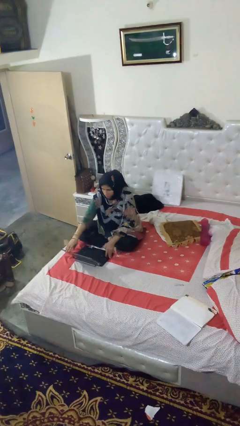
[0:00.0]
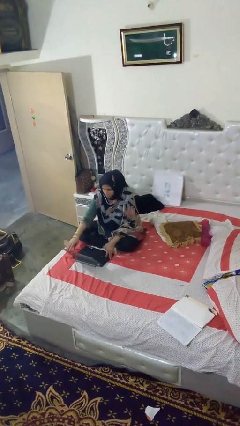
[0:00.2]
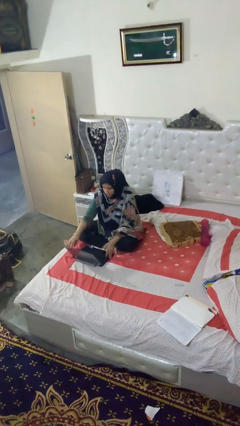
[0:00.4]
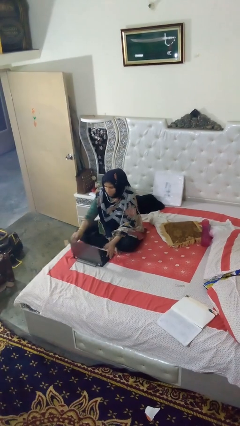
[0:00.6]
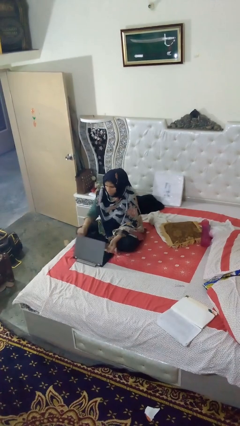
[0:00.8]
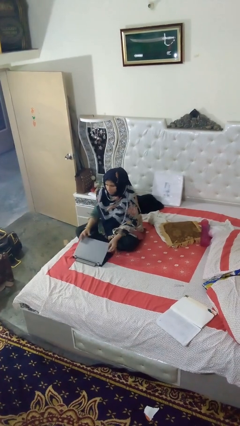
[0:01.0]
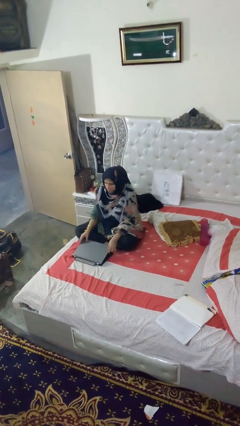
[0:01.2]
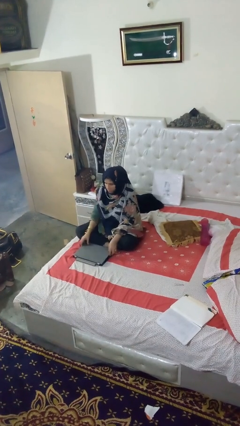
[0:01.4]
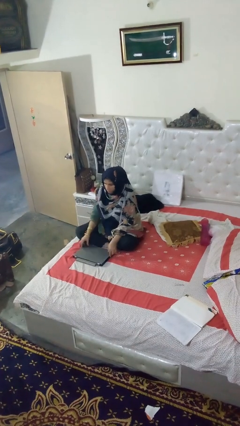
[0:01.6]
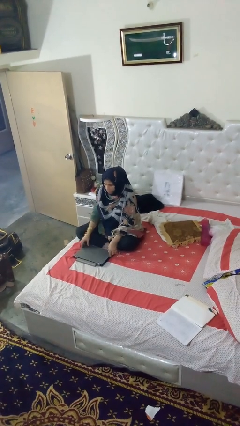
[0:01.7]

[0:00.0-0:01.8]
person closes laptop

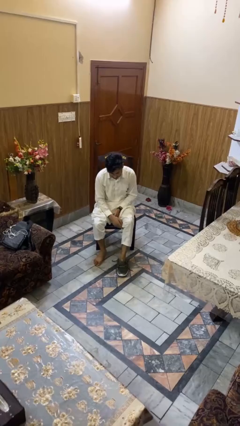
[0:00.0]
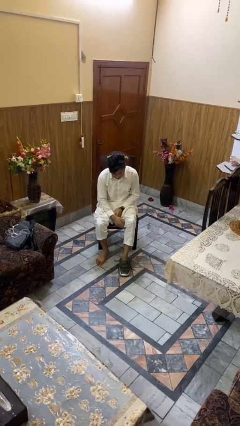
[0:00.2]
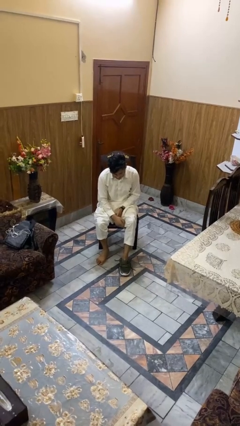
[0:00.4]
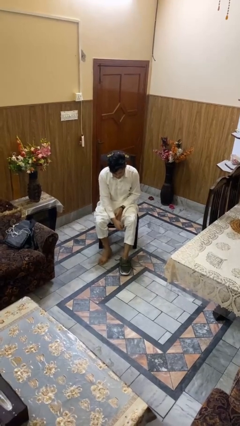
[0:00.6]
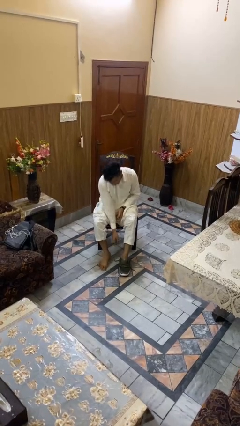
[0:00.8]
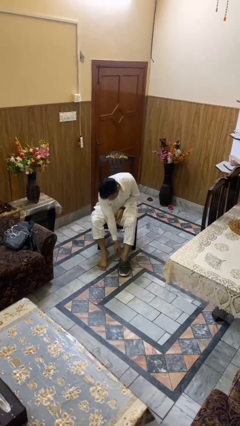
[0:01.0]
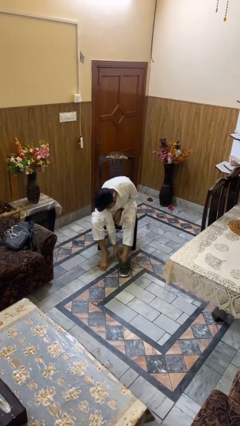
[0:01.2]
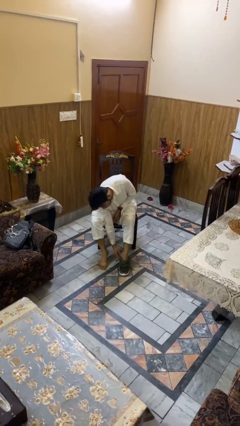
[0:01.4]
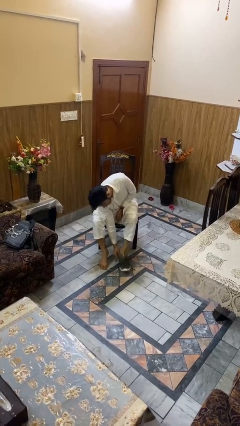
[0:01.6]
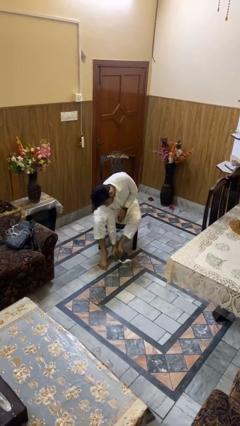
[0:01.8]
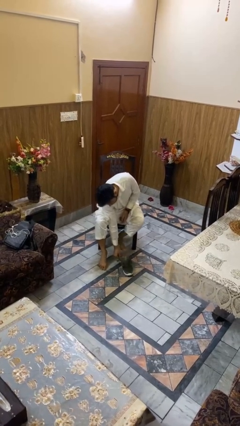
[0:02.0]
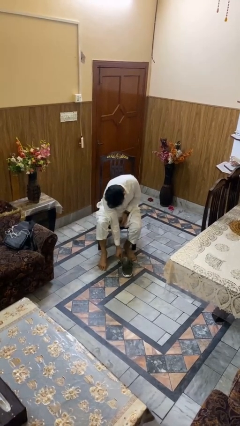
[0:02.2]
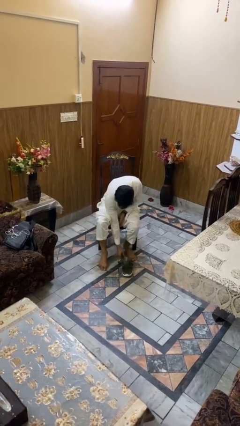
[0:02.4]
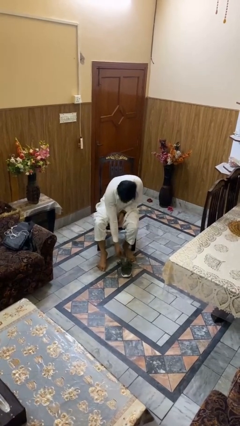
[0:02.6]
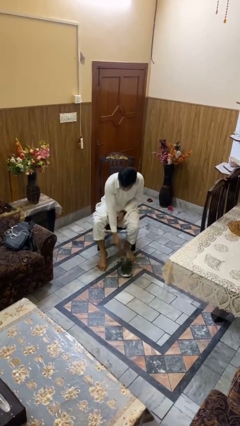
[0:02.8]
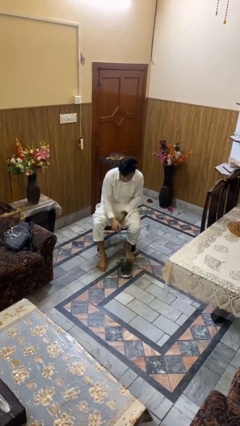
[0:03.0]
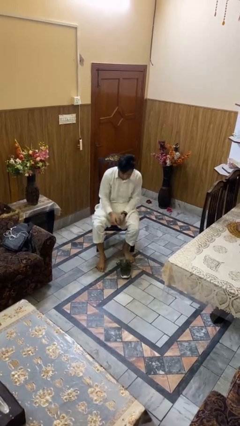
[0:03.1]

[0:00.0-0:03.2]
person takes off shoes

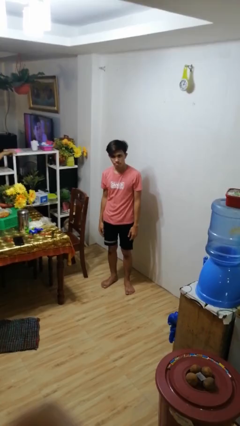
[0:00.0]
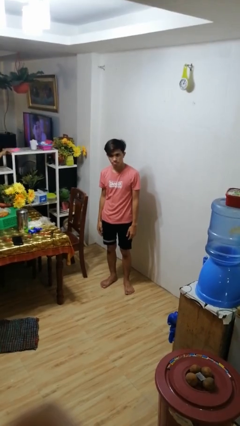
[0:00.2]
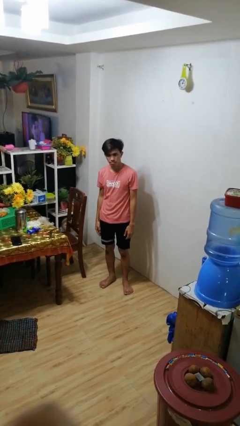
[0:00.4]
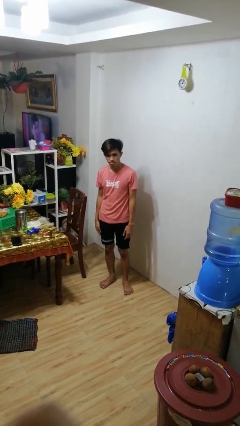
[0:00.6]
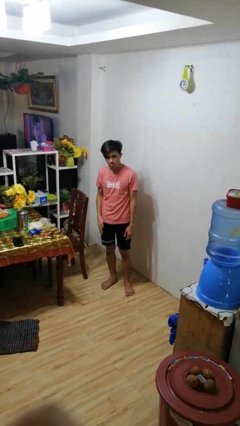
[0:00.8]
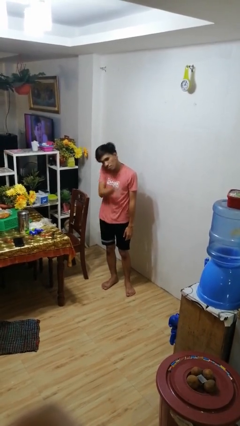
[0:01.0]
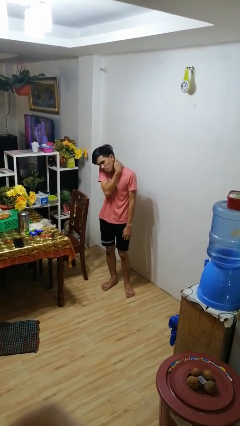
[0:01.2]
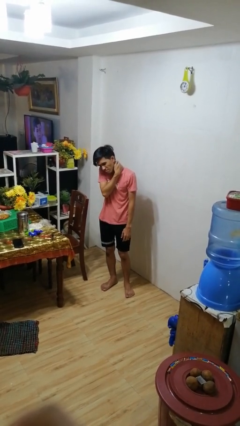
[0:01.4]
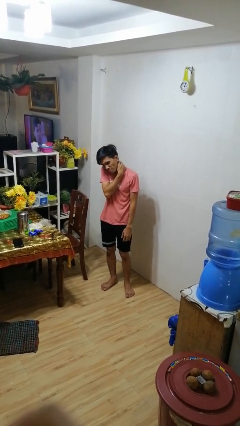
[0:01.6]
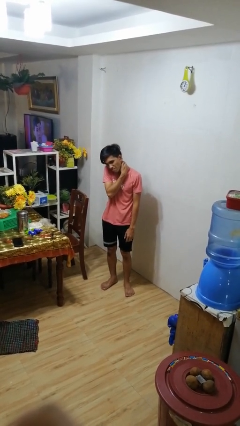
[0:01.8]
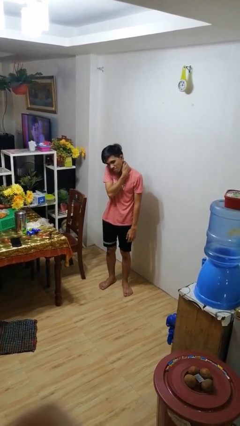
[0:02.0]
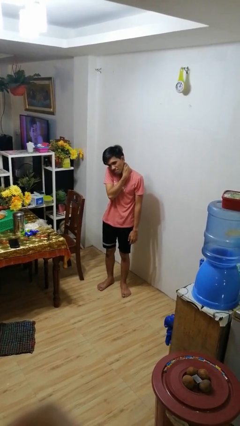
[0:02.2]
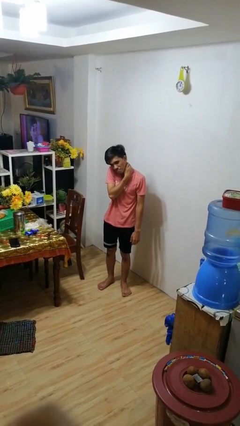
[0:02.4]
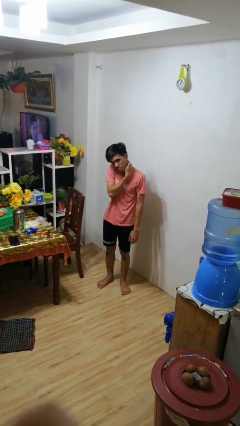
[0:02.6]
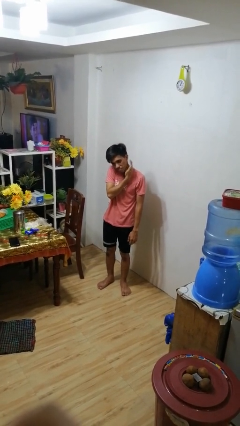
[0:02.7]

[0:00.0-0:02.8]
person swats bug

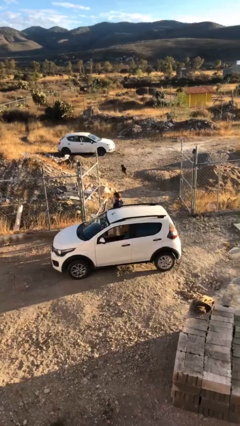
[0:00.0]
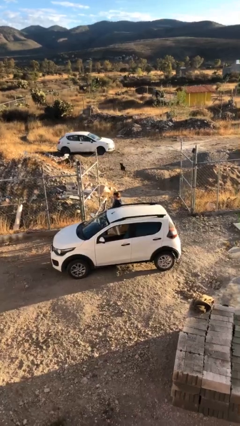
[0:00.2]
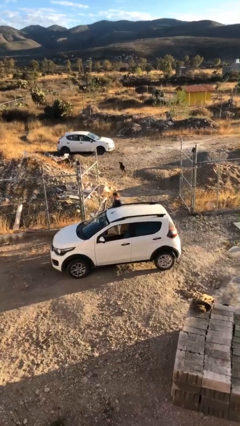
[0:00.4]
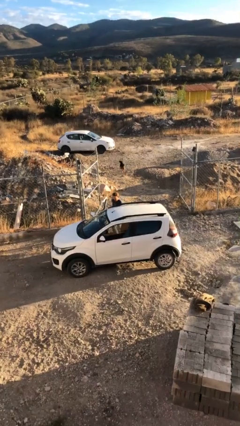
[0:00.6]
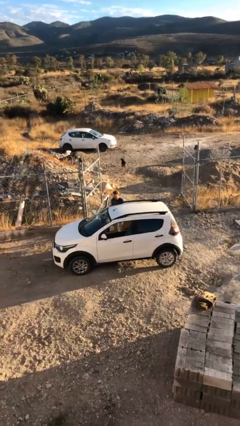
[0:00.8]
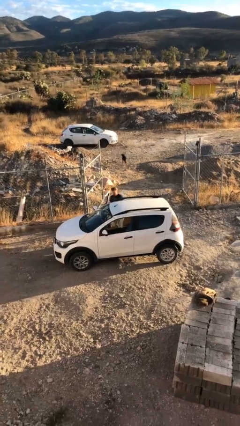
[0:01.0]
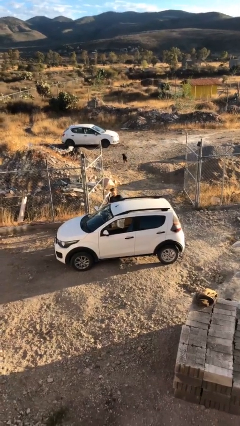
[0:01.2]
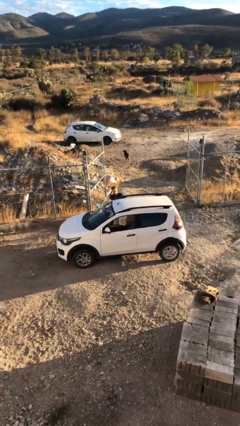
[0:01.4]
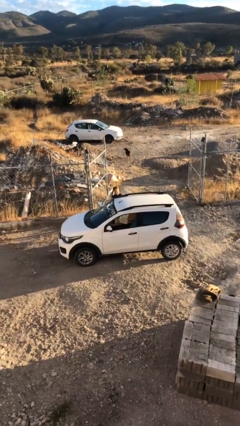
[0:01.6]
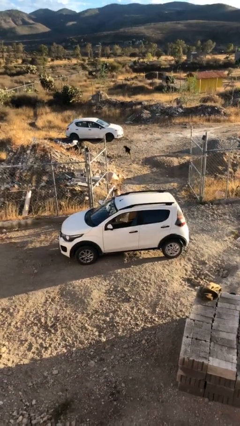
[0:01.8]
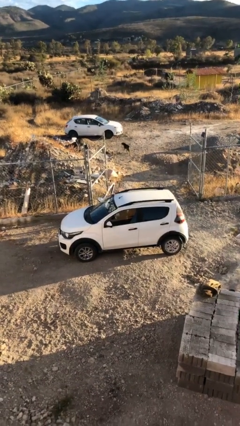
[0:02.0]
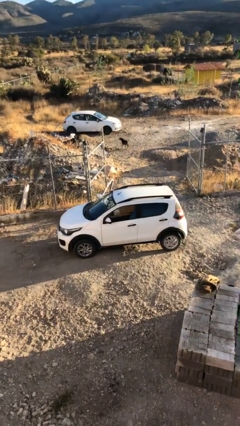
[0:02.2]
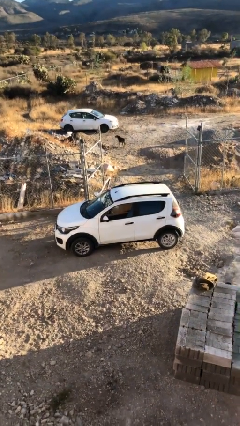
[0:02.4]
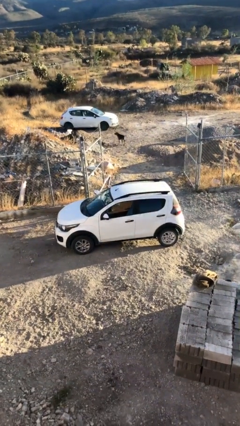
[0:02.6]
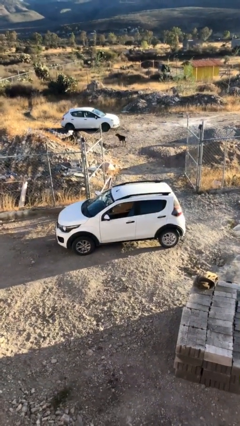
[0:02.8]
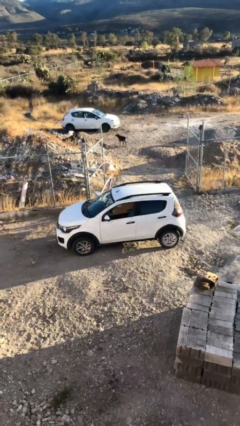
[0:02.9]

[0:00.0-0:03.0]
person enters car

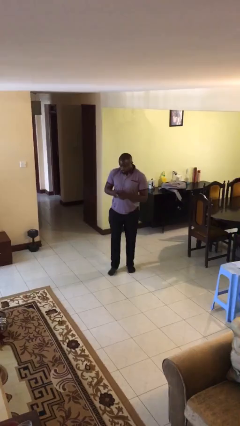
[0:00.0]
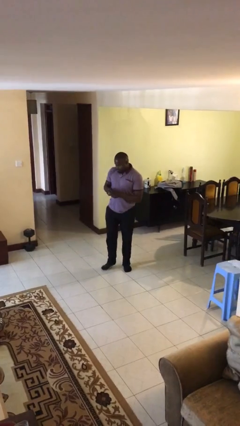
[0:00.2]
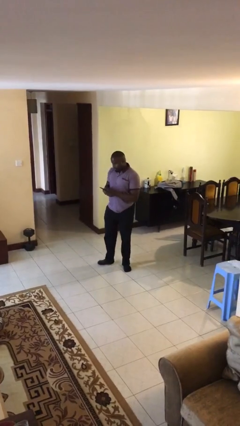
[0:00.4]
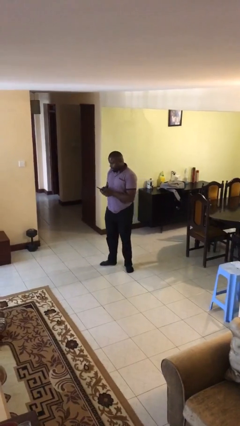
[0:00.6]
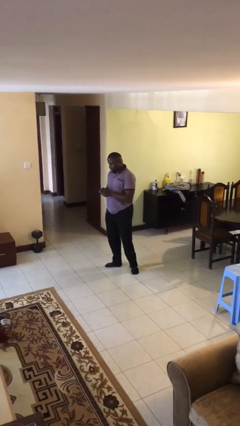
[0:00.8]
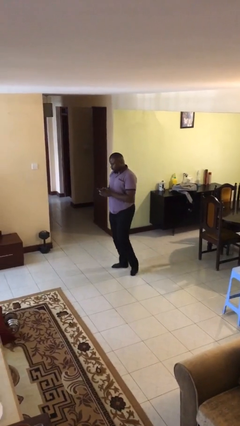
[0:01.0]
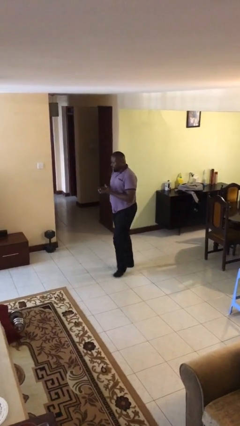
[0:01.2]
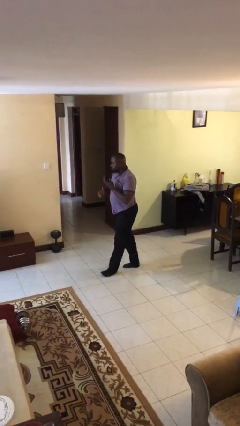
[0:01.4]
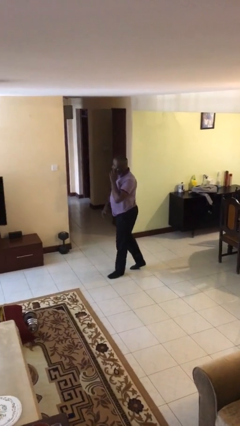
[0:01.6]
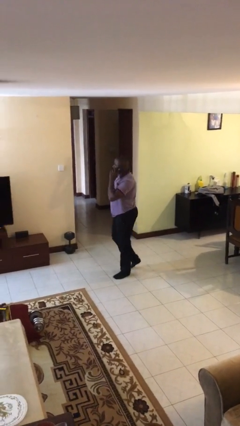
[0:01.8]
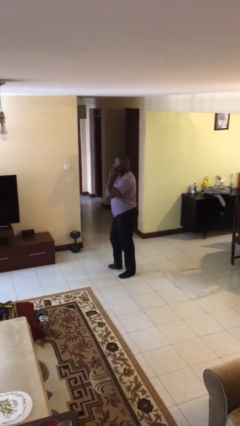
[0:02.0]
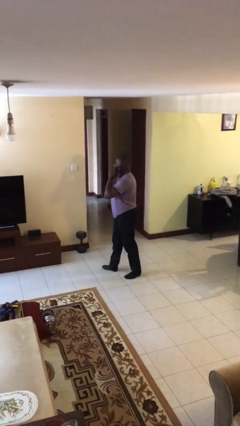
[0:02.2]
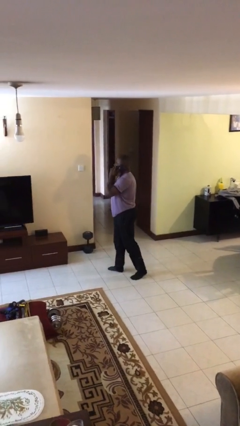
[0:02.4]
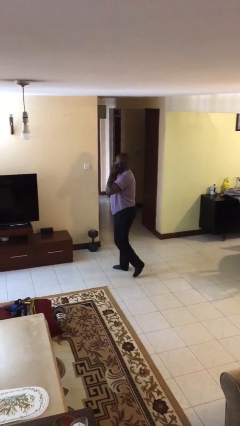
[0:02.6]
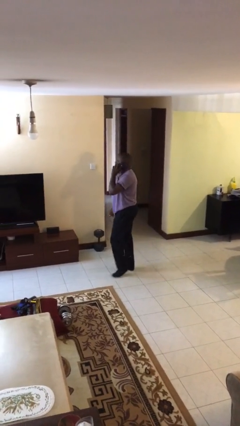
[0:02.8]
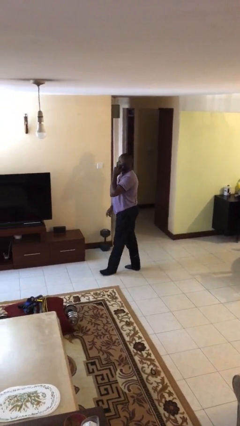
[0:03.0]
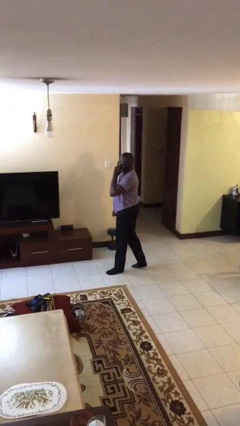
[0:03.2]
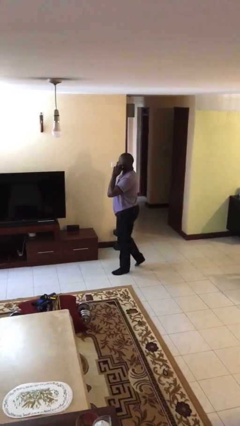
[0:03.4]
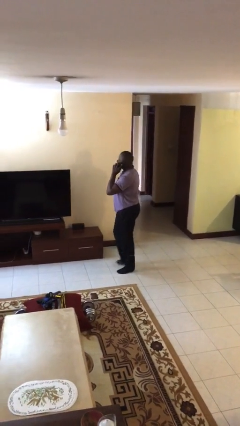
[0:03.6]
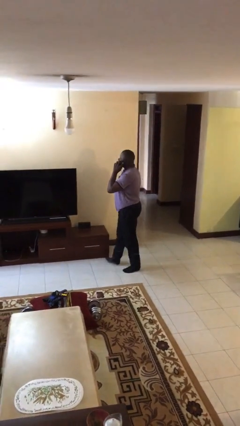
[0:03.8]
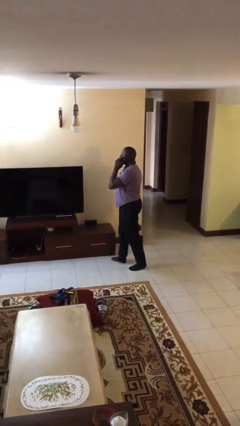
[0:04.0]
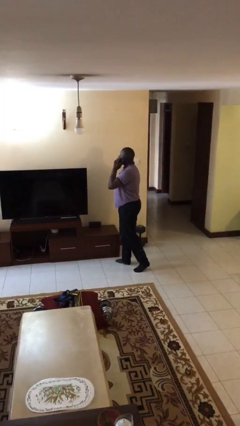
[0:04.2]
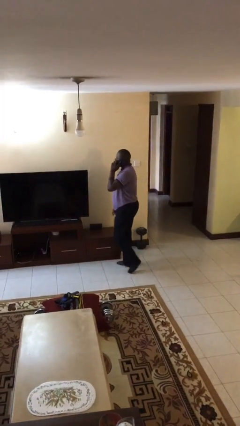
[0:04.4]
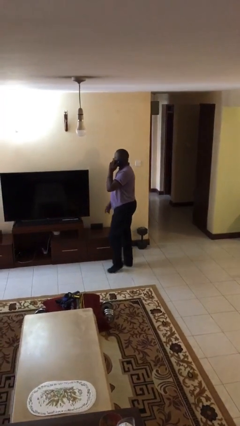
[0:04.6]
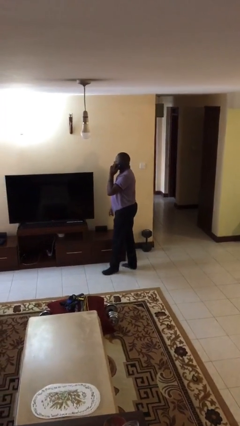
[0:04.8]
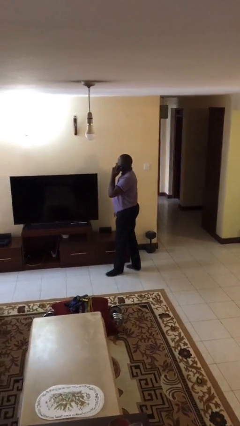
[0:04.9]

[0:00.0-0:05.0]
person talks on phone

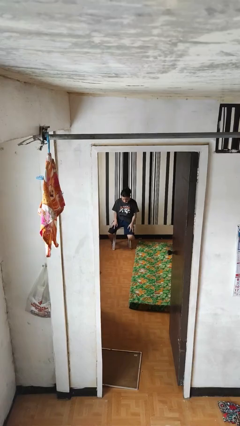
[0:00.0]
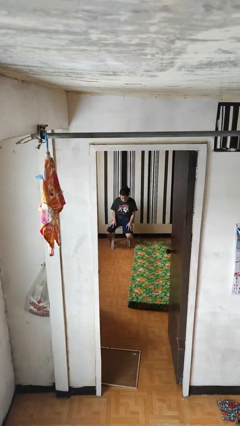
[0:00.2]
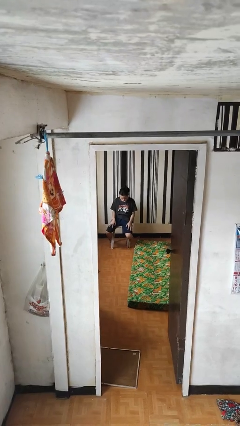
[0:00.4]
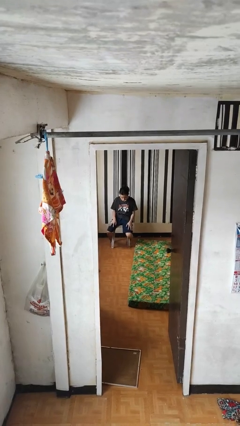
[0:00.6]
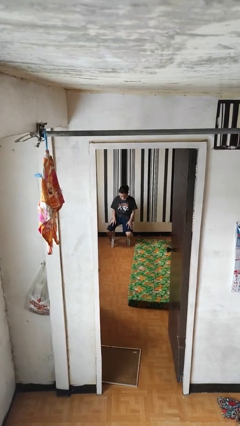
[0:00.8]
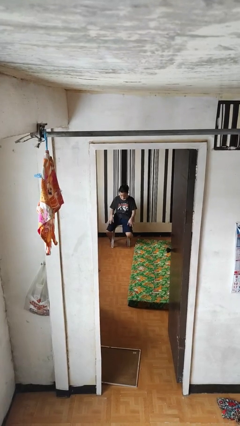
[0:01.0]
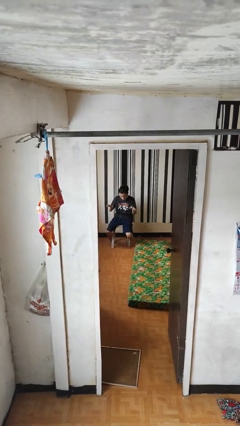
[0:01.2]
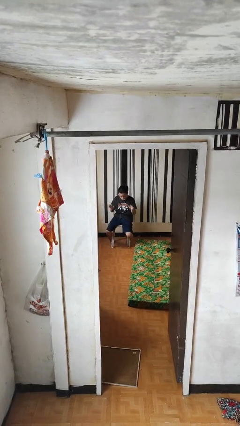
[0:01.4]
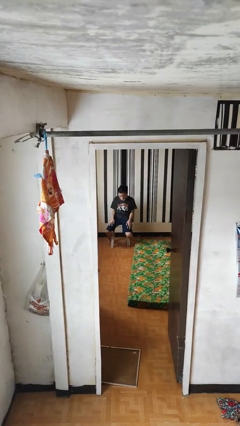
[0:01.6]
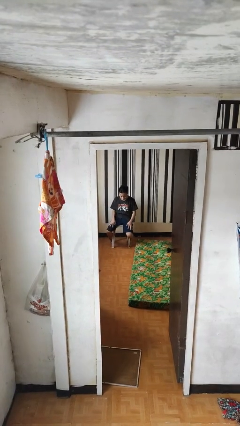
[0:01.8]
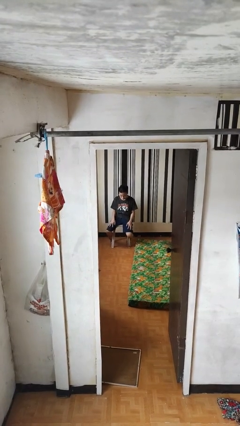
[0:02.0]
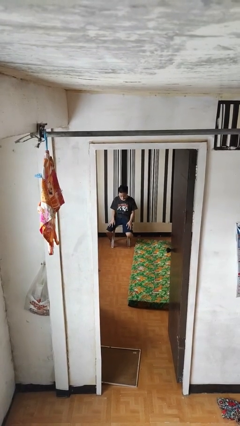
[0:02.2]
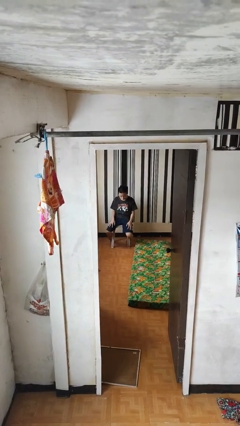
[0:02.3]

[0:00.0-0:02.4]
person slaps hands on thighs
